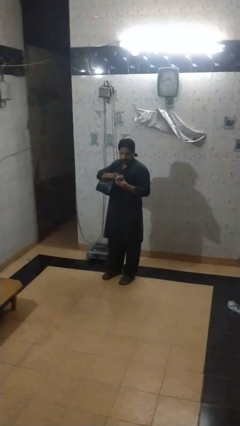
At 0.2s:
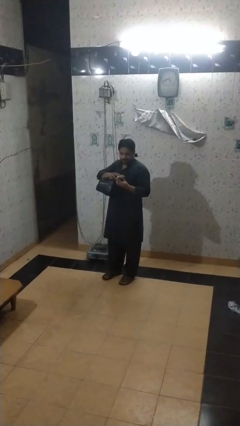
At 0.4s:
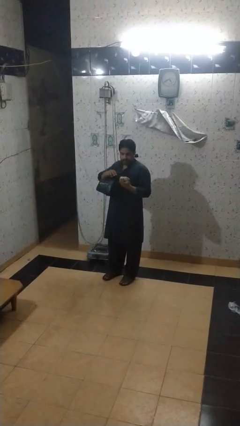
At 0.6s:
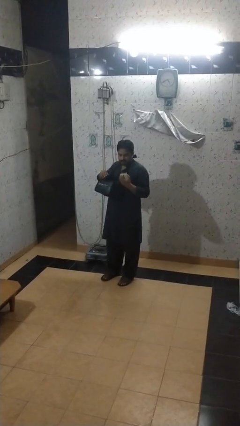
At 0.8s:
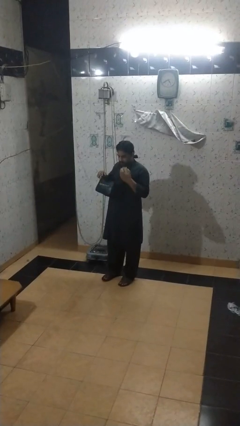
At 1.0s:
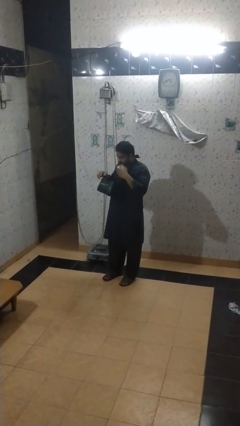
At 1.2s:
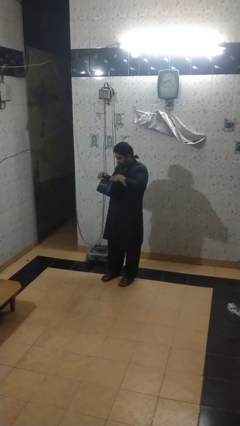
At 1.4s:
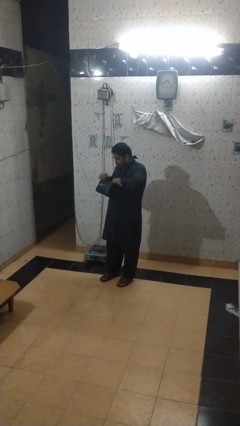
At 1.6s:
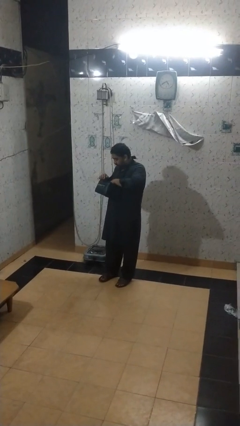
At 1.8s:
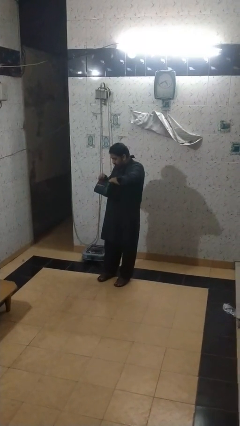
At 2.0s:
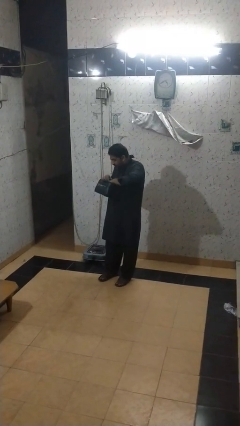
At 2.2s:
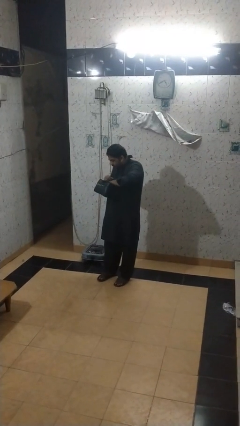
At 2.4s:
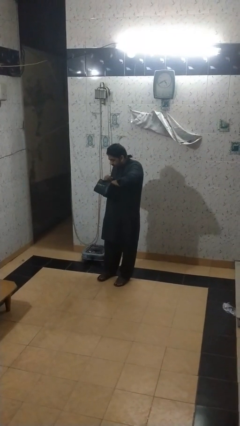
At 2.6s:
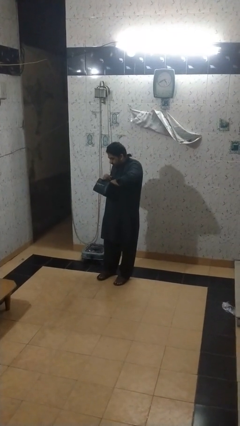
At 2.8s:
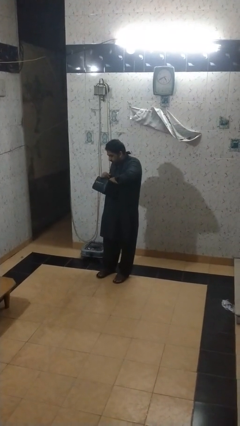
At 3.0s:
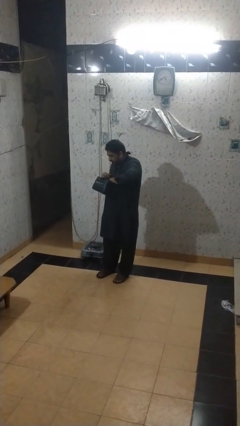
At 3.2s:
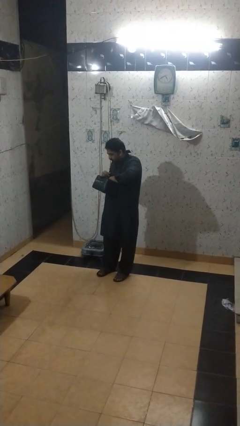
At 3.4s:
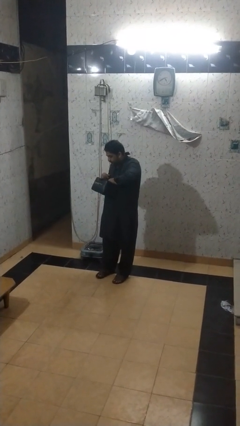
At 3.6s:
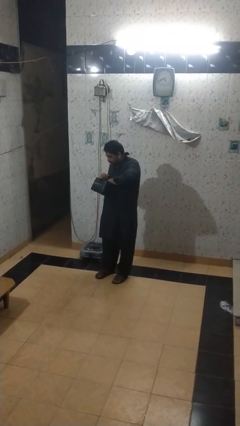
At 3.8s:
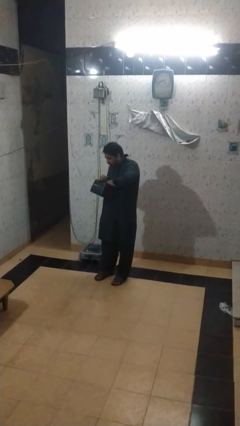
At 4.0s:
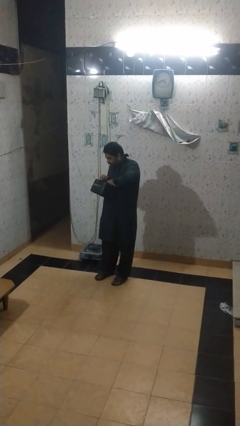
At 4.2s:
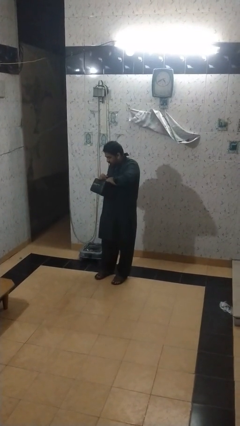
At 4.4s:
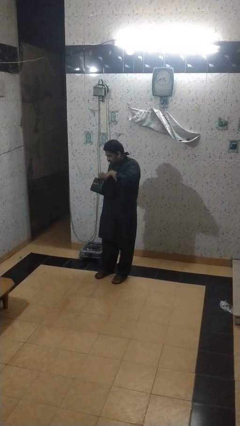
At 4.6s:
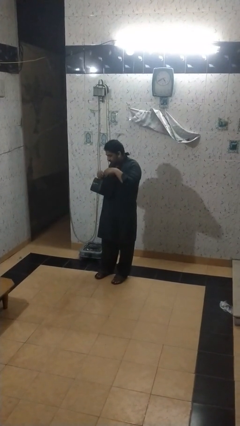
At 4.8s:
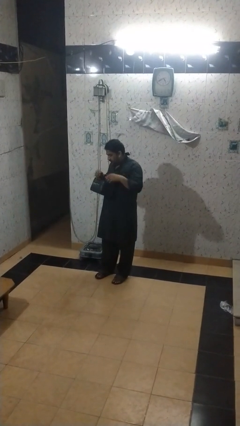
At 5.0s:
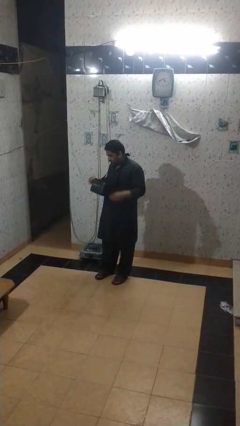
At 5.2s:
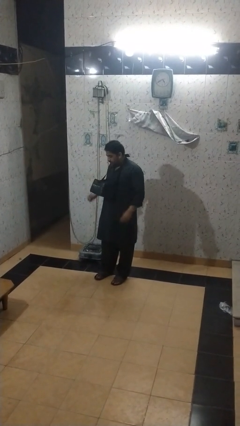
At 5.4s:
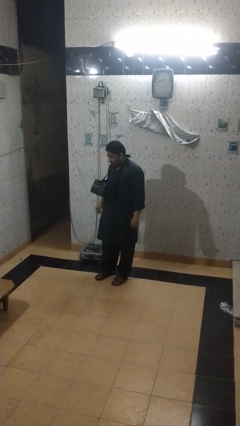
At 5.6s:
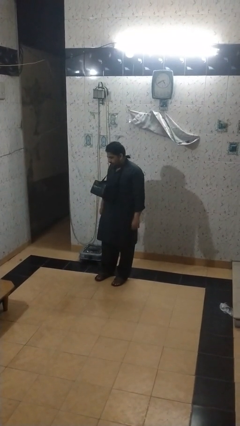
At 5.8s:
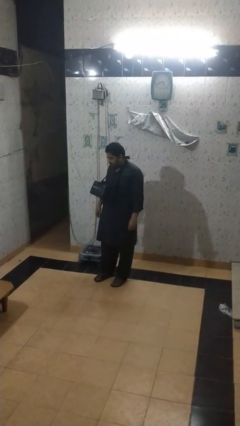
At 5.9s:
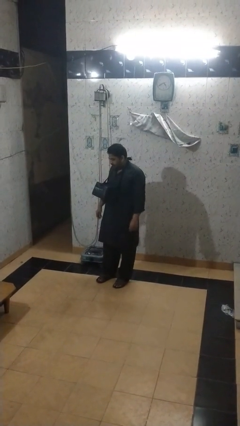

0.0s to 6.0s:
person puts object into backpack

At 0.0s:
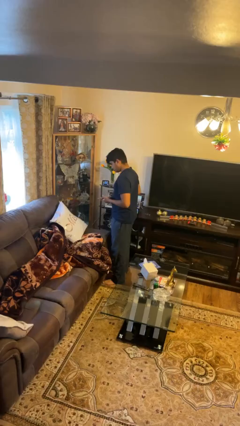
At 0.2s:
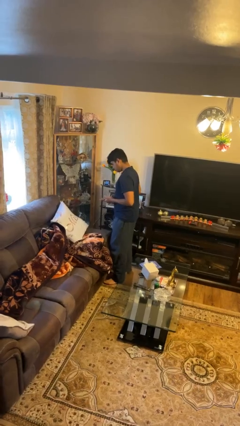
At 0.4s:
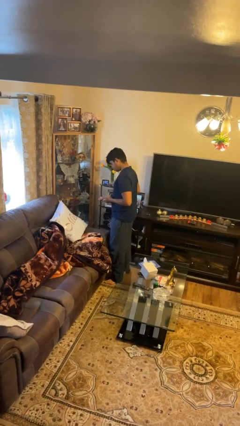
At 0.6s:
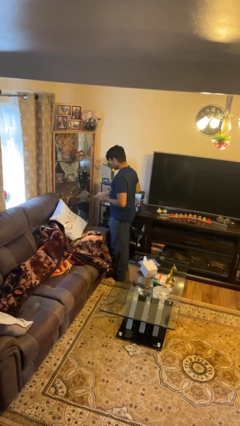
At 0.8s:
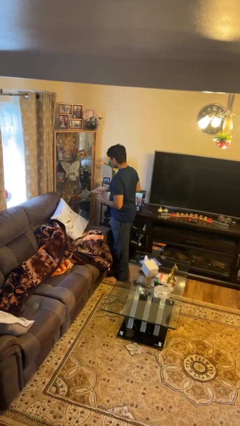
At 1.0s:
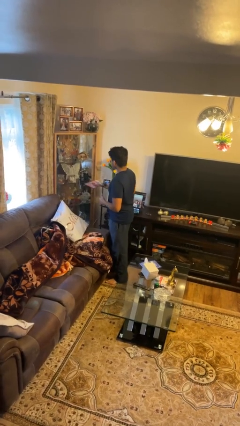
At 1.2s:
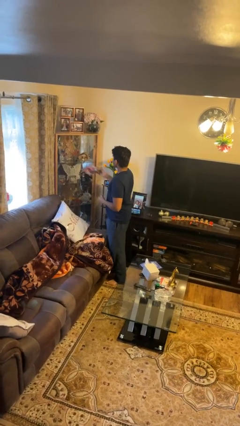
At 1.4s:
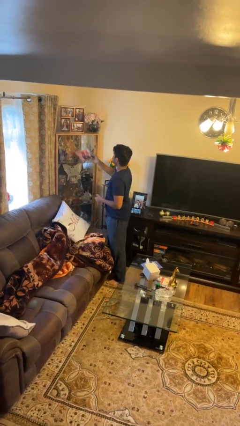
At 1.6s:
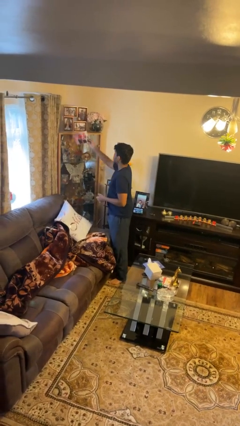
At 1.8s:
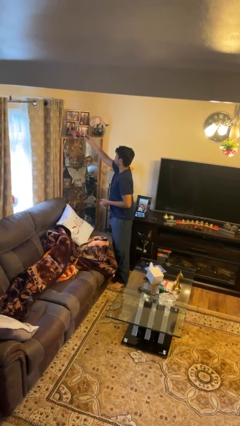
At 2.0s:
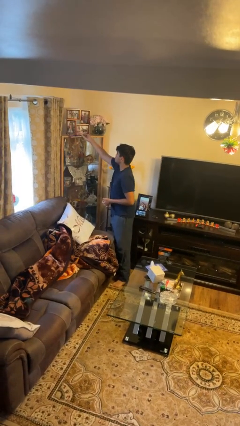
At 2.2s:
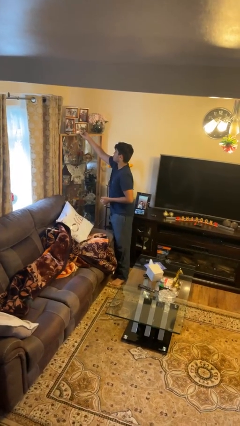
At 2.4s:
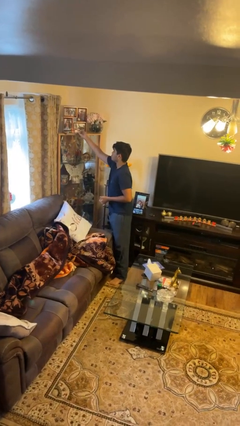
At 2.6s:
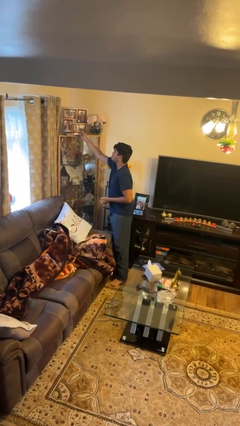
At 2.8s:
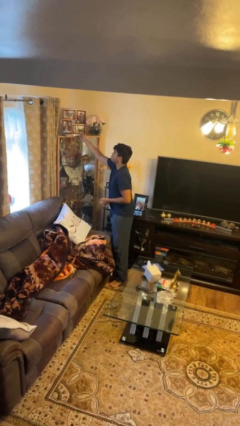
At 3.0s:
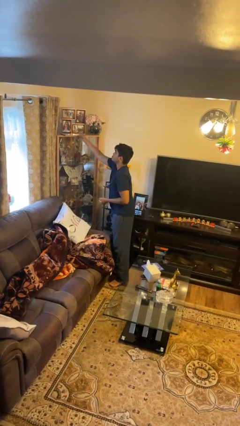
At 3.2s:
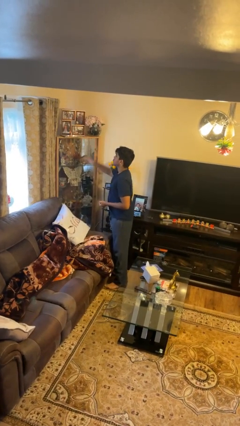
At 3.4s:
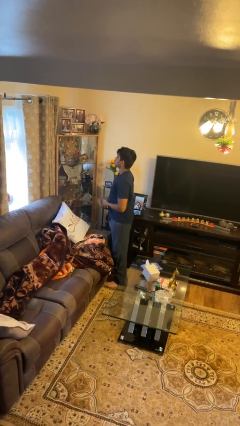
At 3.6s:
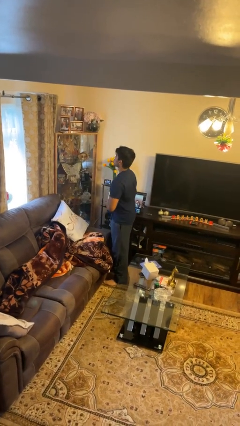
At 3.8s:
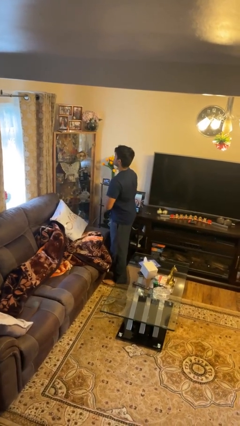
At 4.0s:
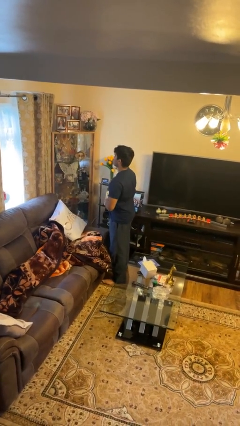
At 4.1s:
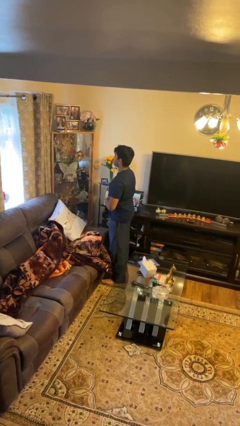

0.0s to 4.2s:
person puts down object on shelf

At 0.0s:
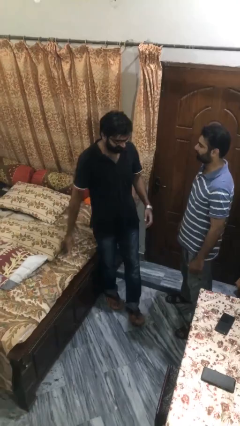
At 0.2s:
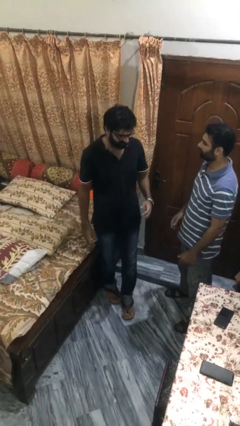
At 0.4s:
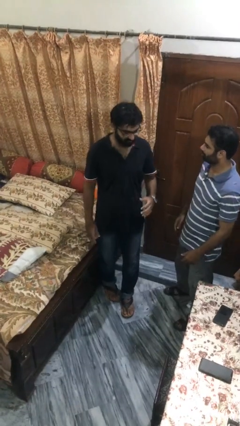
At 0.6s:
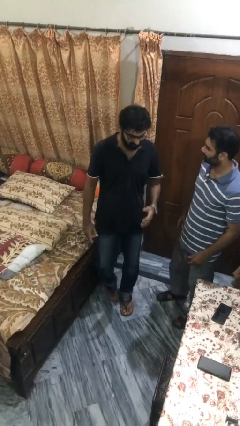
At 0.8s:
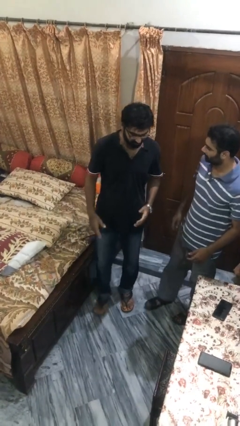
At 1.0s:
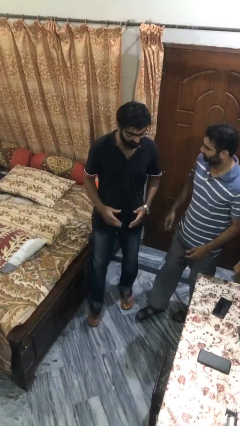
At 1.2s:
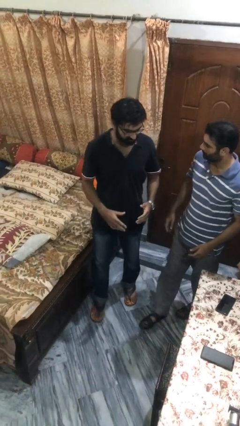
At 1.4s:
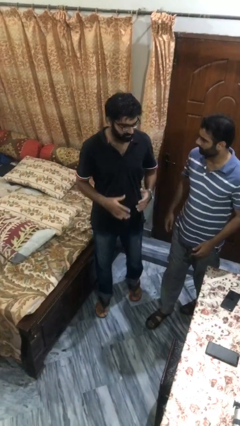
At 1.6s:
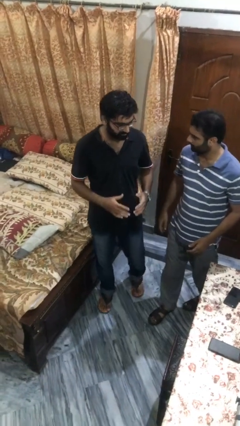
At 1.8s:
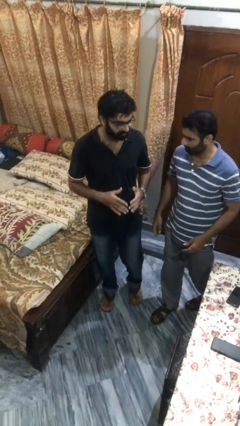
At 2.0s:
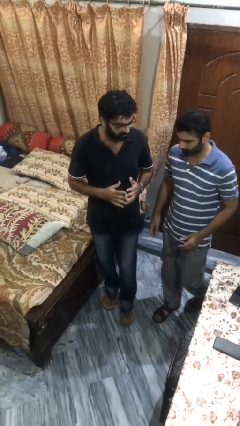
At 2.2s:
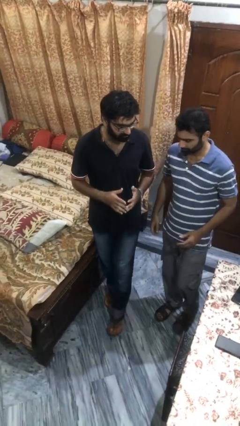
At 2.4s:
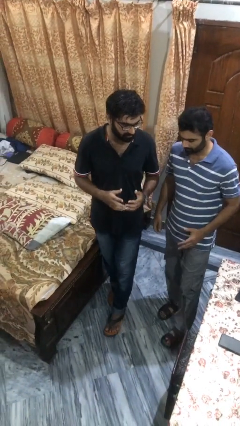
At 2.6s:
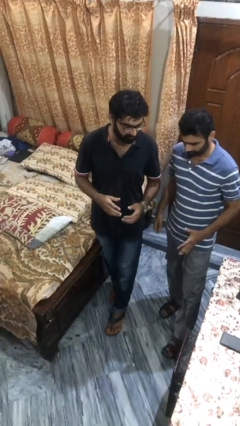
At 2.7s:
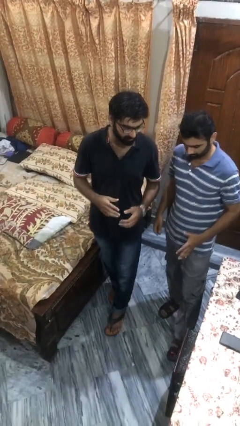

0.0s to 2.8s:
person talks to person

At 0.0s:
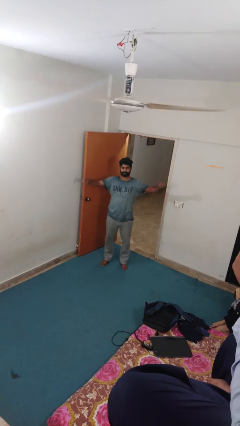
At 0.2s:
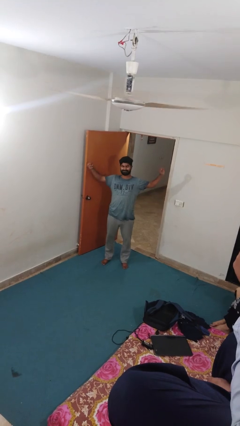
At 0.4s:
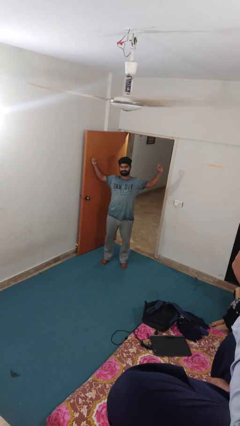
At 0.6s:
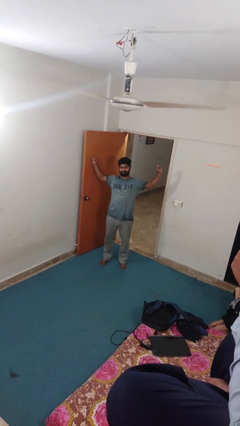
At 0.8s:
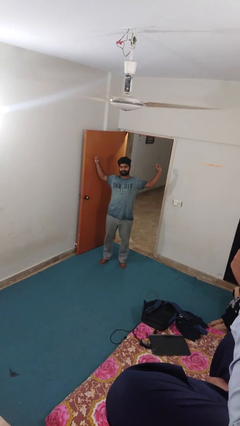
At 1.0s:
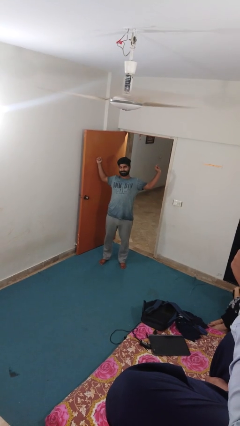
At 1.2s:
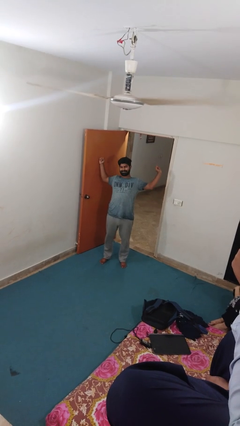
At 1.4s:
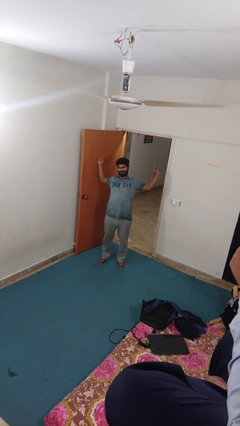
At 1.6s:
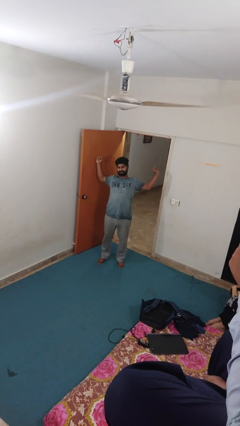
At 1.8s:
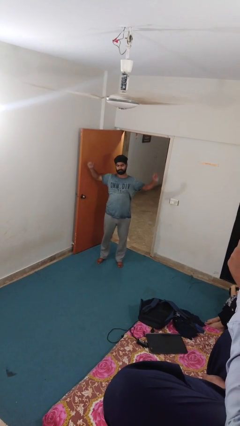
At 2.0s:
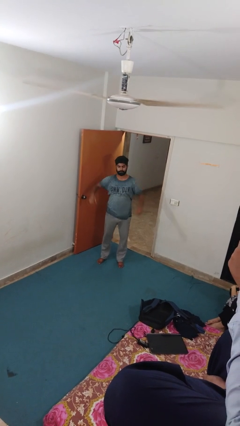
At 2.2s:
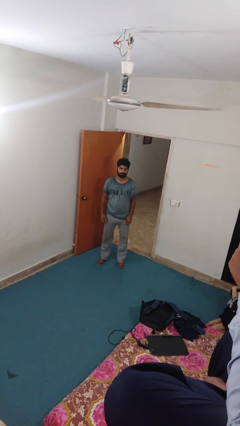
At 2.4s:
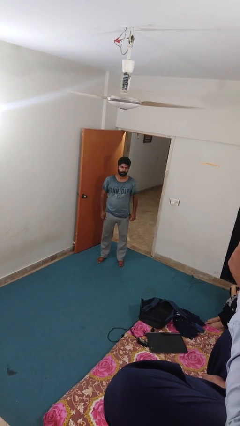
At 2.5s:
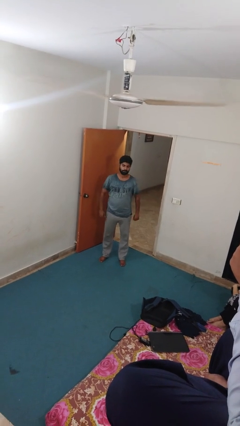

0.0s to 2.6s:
person stretches arms to side

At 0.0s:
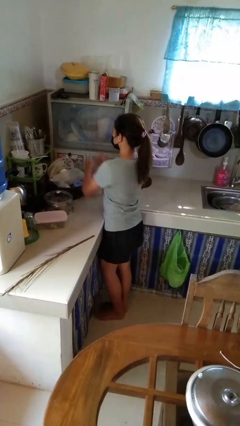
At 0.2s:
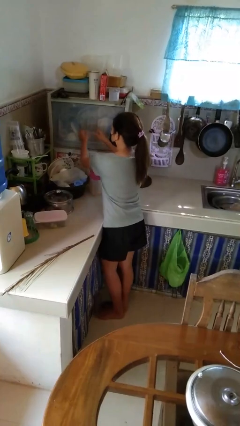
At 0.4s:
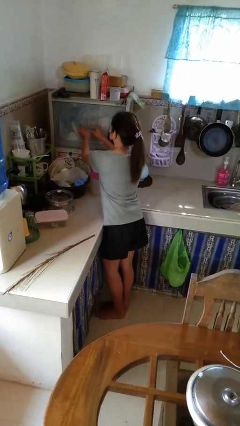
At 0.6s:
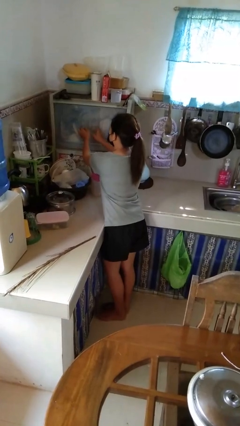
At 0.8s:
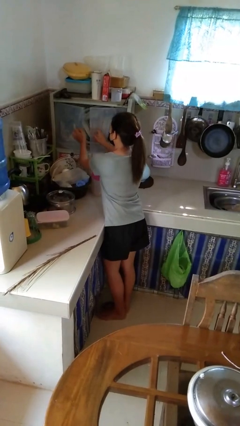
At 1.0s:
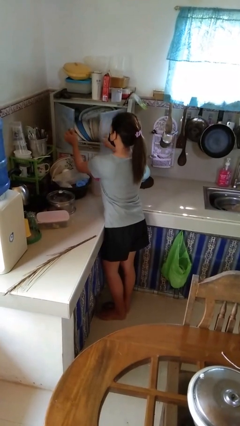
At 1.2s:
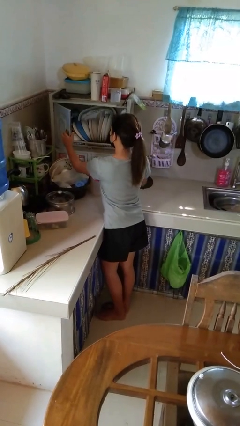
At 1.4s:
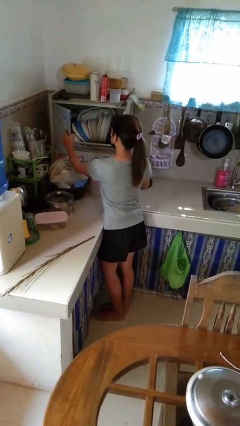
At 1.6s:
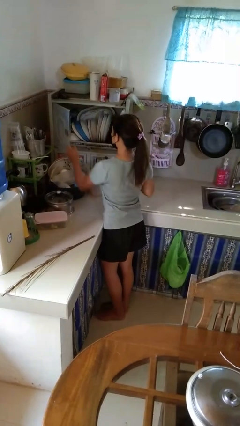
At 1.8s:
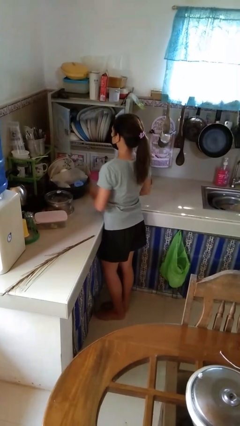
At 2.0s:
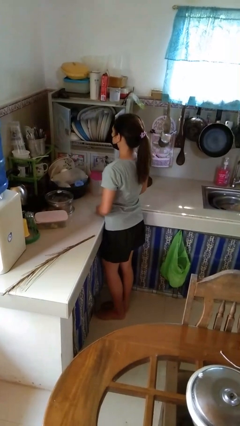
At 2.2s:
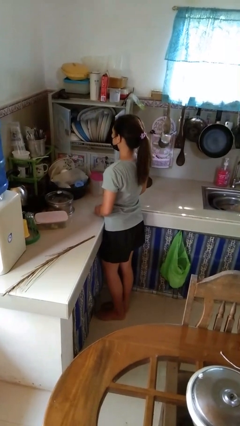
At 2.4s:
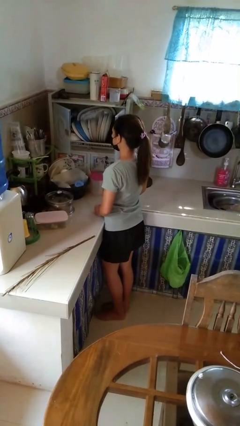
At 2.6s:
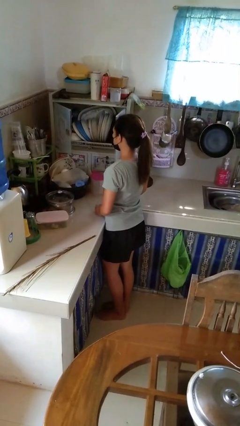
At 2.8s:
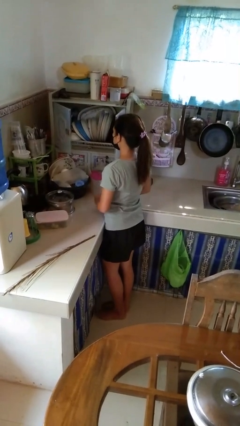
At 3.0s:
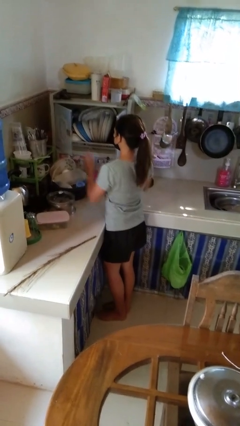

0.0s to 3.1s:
person opens kitchen drawer
